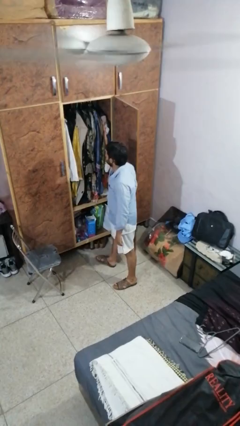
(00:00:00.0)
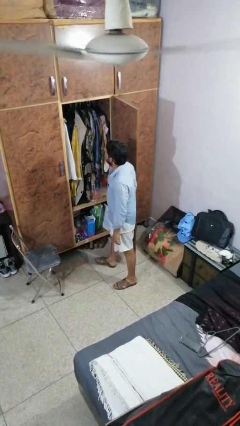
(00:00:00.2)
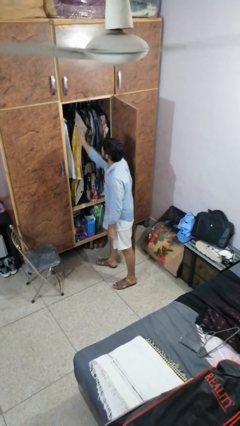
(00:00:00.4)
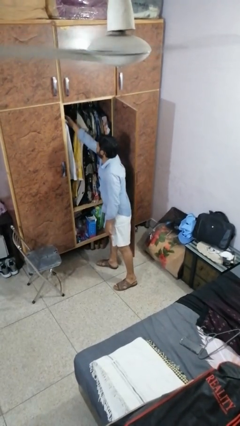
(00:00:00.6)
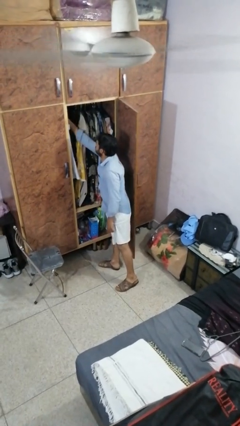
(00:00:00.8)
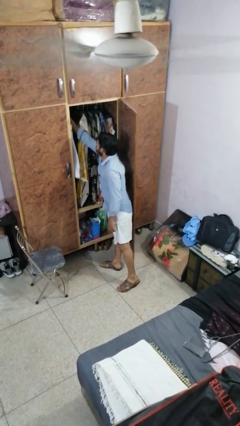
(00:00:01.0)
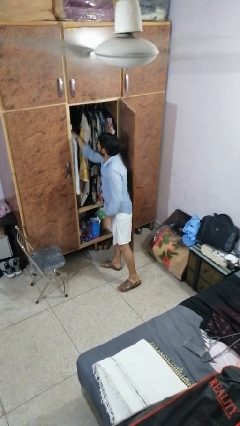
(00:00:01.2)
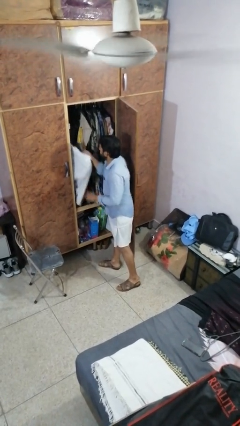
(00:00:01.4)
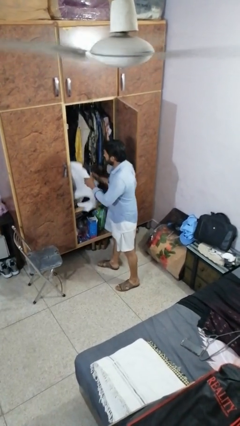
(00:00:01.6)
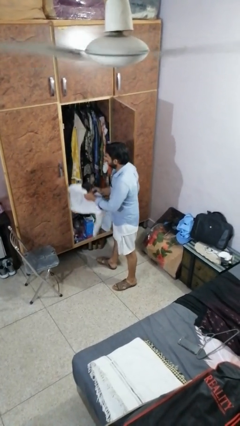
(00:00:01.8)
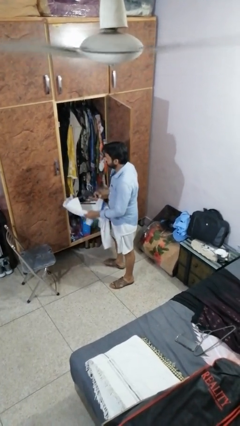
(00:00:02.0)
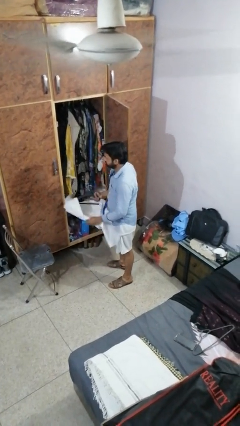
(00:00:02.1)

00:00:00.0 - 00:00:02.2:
person takes clothes from closet

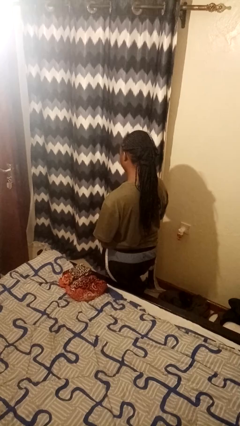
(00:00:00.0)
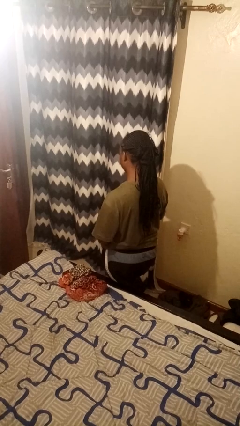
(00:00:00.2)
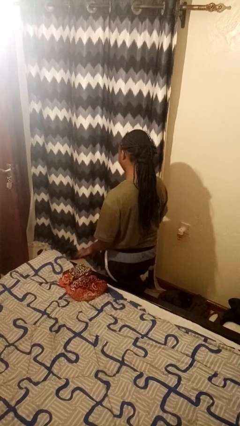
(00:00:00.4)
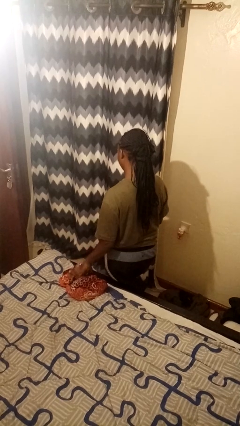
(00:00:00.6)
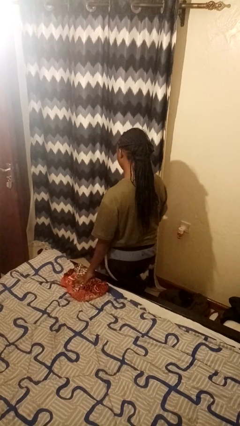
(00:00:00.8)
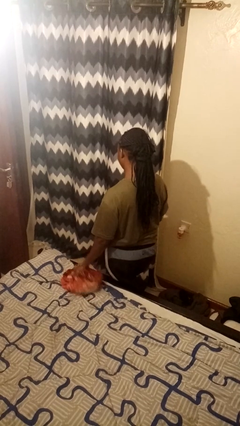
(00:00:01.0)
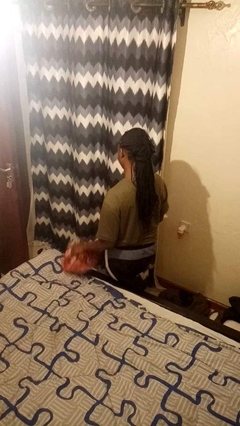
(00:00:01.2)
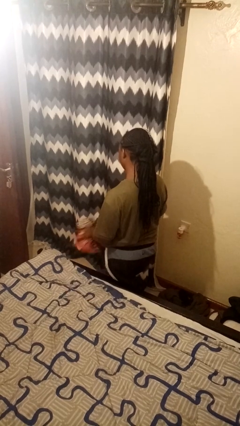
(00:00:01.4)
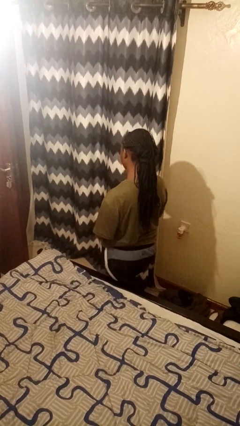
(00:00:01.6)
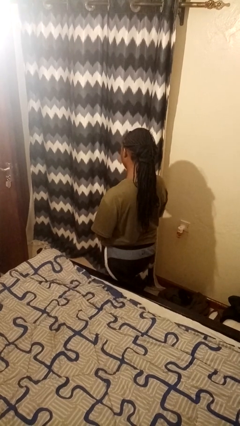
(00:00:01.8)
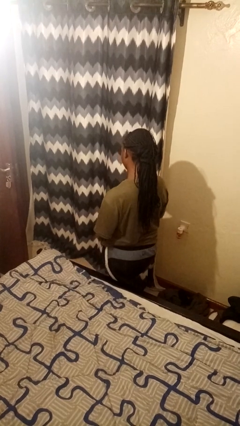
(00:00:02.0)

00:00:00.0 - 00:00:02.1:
person picks up object from bed

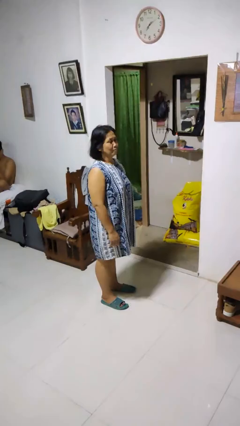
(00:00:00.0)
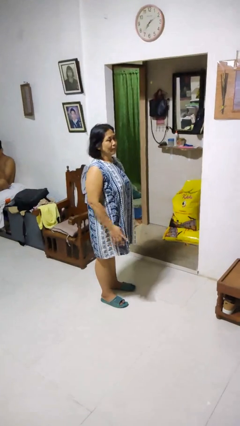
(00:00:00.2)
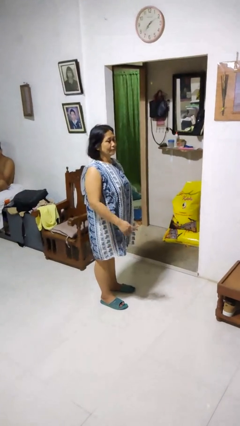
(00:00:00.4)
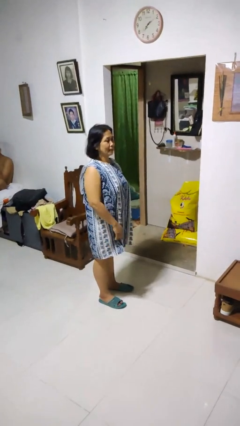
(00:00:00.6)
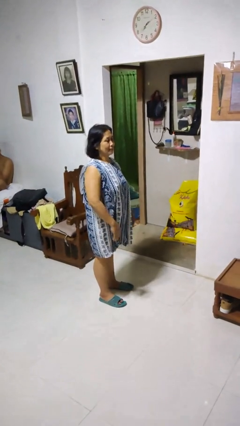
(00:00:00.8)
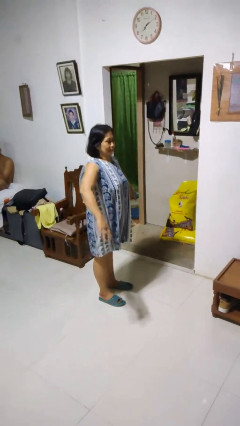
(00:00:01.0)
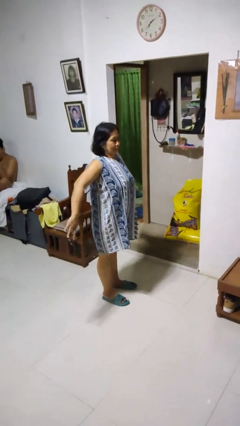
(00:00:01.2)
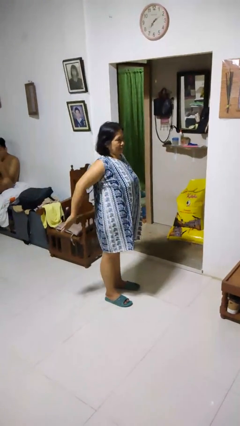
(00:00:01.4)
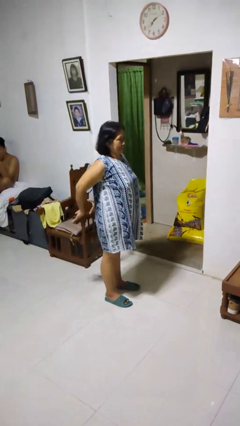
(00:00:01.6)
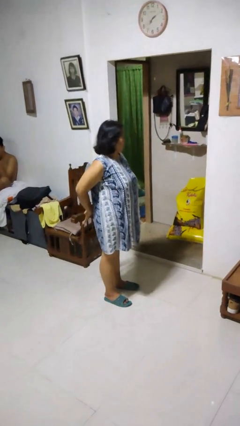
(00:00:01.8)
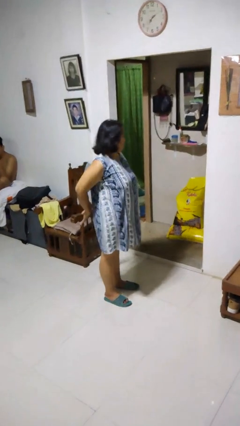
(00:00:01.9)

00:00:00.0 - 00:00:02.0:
person stretches back

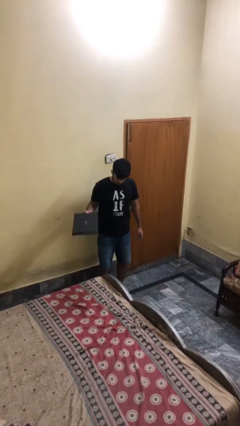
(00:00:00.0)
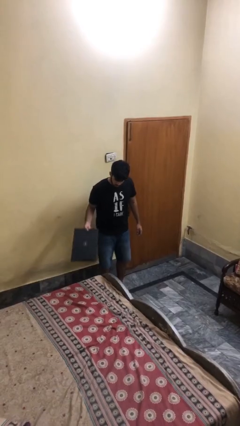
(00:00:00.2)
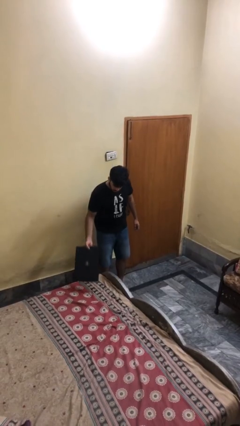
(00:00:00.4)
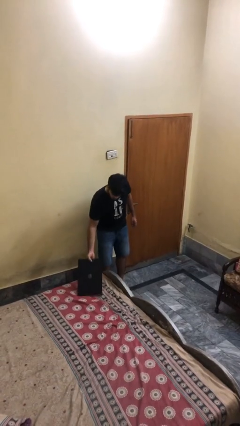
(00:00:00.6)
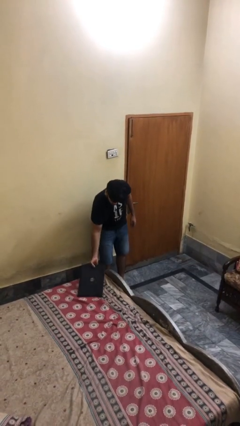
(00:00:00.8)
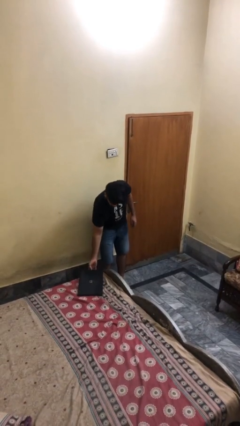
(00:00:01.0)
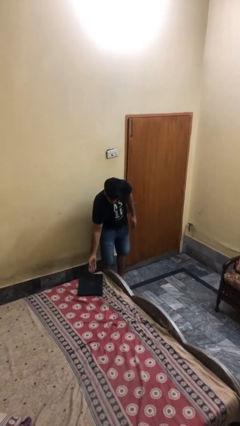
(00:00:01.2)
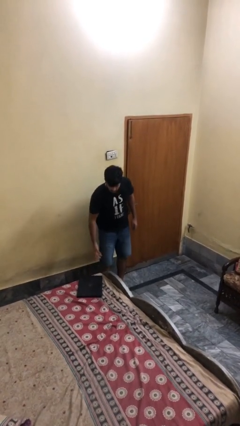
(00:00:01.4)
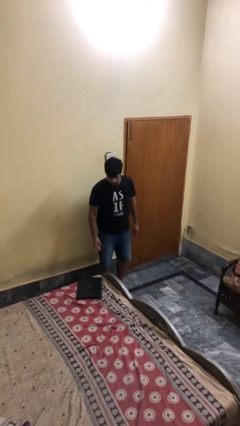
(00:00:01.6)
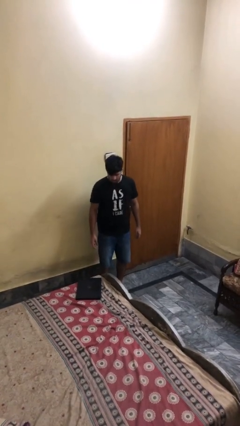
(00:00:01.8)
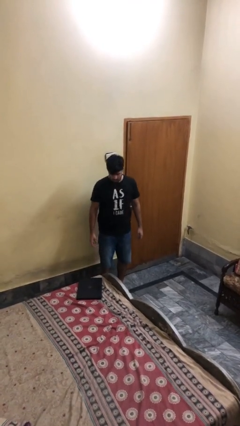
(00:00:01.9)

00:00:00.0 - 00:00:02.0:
person puts down object on bed

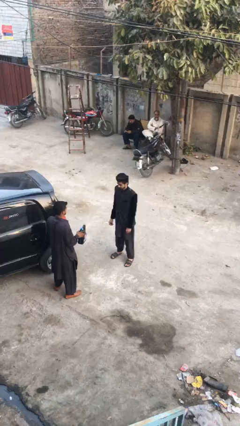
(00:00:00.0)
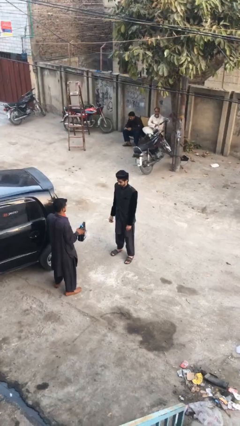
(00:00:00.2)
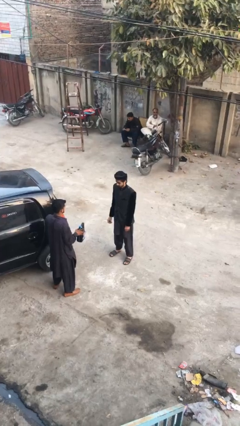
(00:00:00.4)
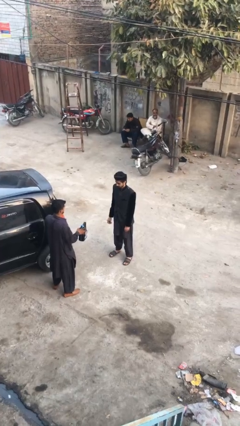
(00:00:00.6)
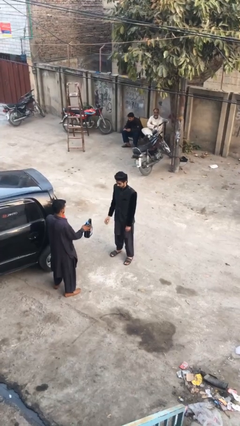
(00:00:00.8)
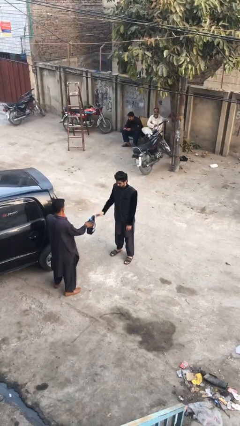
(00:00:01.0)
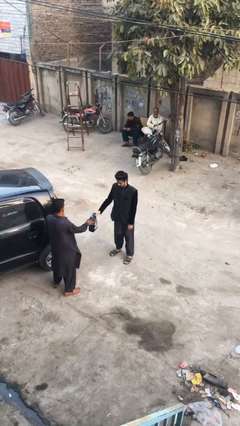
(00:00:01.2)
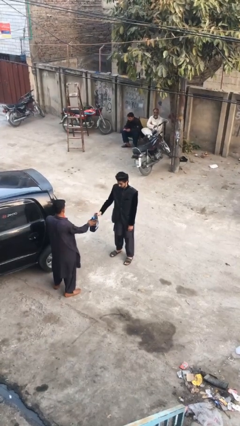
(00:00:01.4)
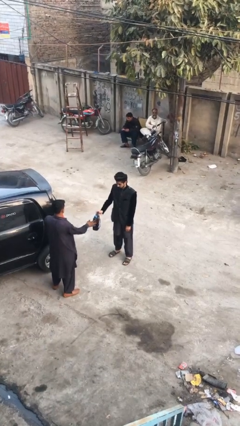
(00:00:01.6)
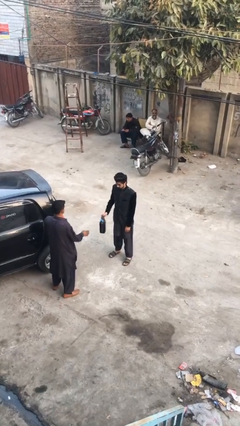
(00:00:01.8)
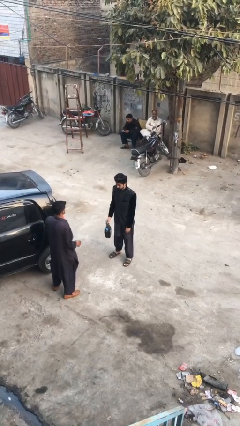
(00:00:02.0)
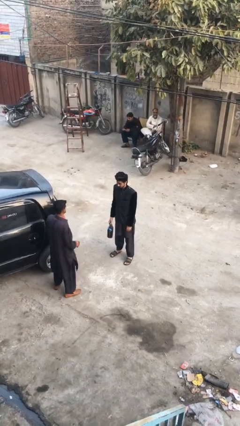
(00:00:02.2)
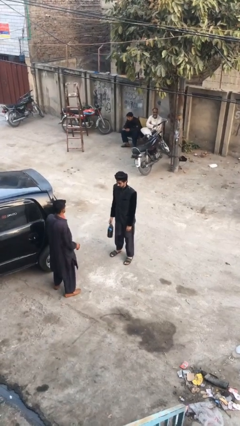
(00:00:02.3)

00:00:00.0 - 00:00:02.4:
person transfers object to person

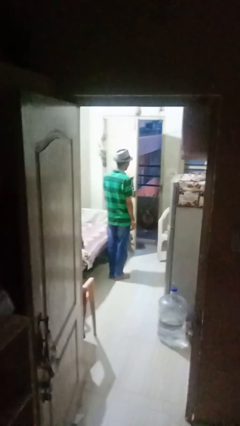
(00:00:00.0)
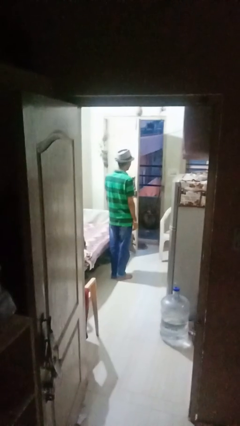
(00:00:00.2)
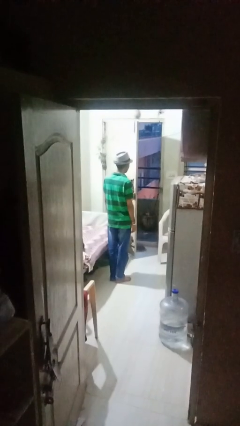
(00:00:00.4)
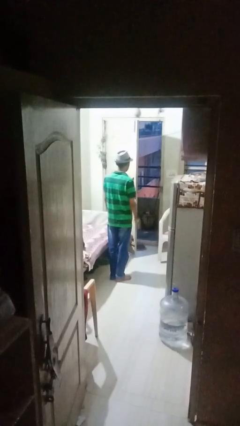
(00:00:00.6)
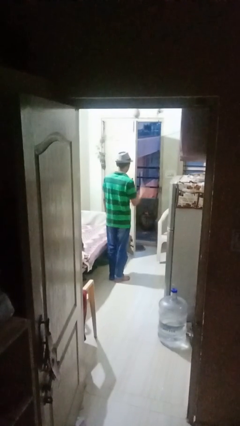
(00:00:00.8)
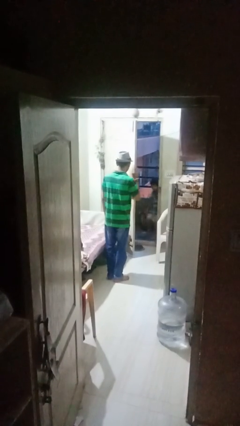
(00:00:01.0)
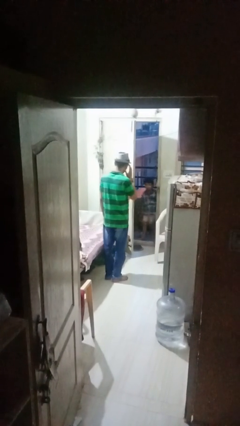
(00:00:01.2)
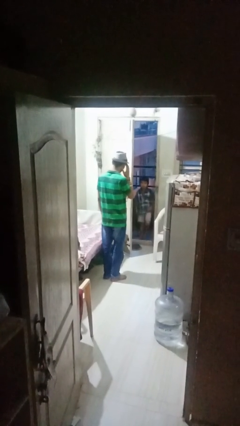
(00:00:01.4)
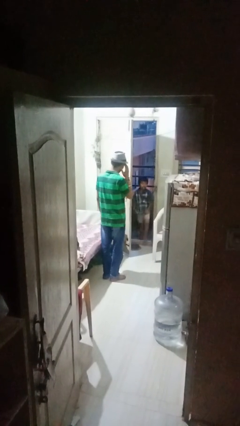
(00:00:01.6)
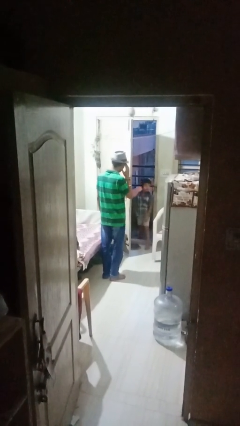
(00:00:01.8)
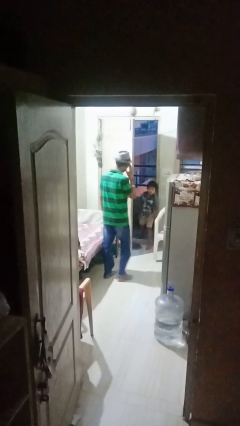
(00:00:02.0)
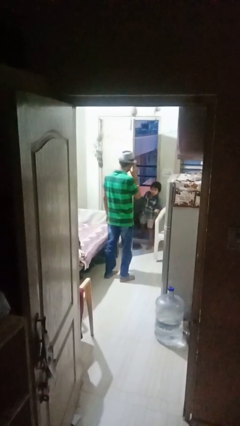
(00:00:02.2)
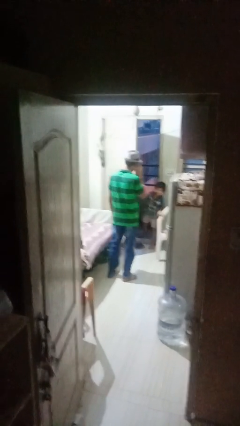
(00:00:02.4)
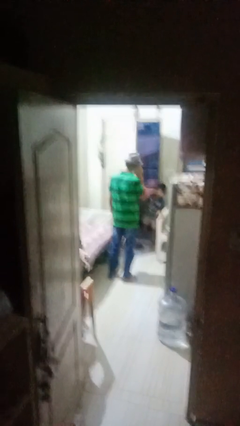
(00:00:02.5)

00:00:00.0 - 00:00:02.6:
person salutes

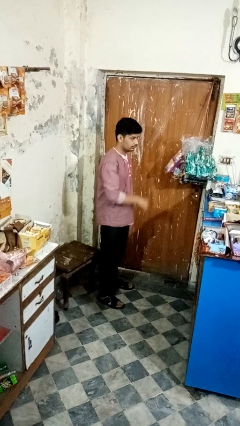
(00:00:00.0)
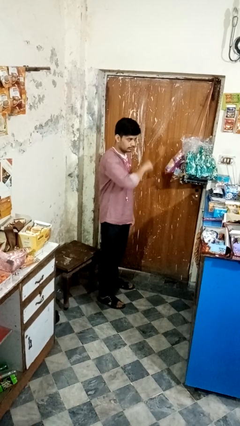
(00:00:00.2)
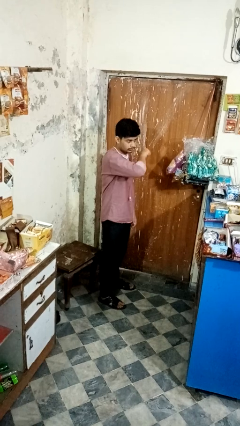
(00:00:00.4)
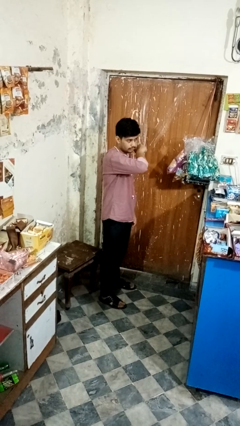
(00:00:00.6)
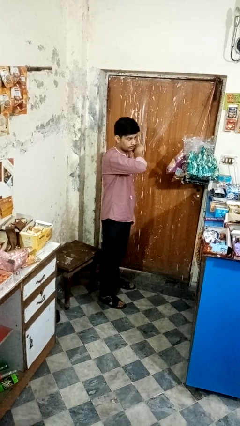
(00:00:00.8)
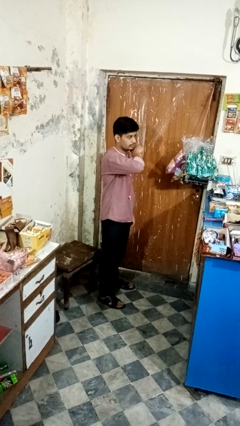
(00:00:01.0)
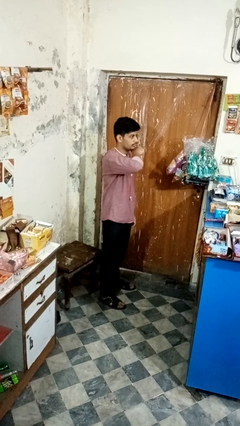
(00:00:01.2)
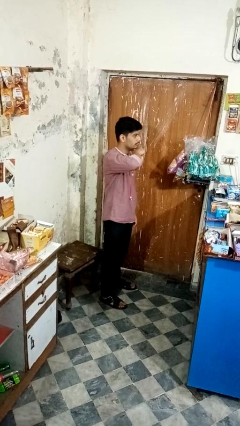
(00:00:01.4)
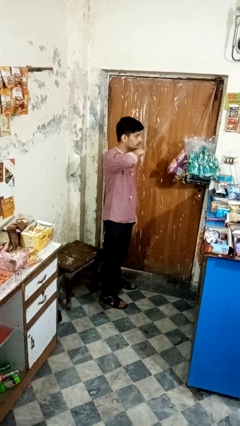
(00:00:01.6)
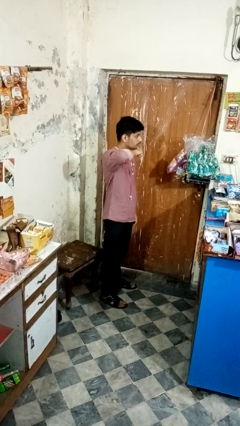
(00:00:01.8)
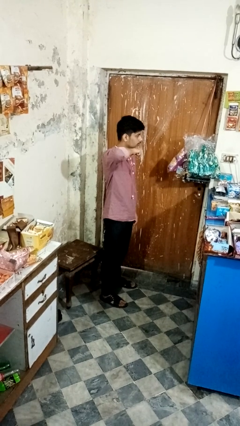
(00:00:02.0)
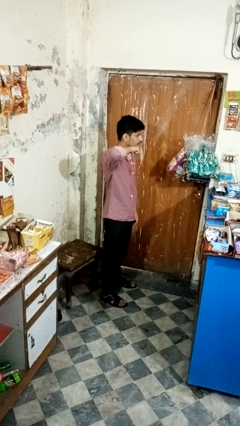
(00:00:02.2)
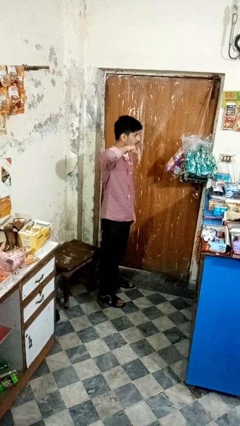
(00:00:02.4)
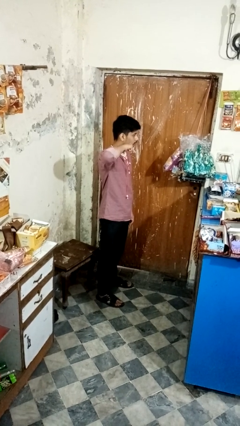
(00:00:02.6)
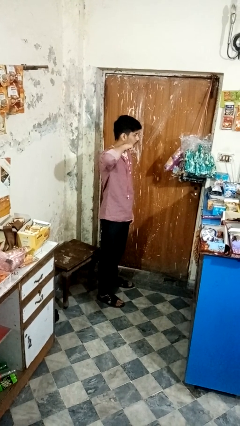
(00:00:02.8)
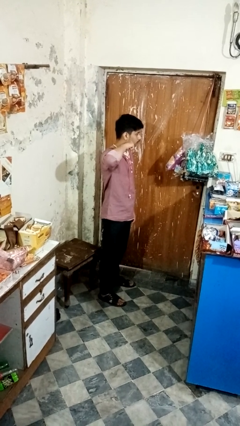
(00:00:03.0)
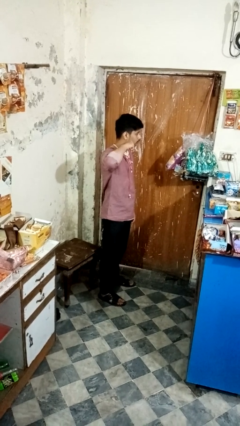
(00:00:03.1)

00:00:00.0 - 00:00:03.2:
person gestures cut

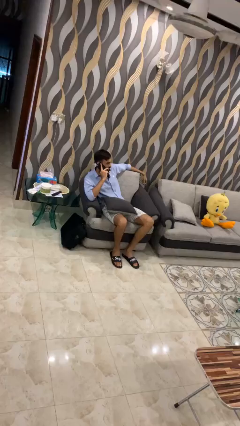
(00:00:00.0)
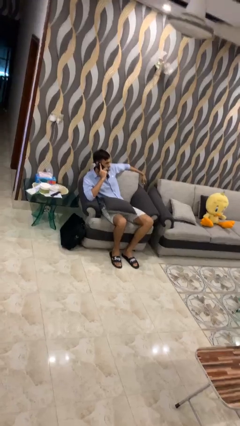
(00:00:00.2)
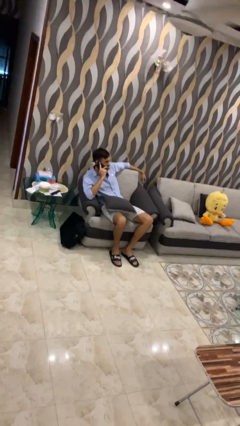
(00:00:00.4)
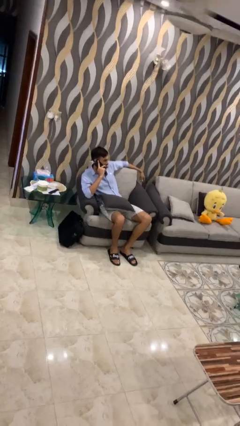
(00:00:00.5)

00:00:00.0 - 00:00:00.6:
person talks on phone
